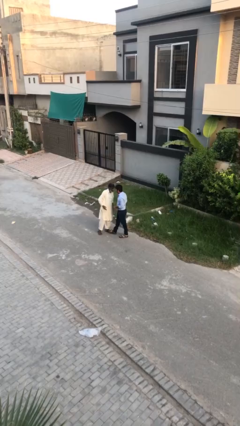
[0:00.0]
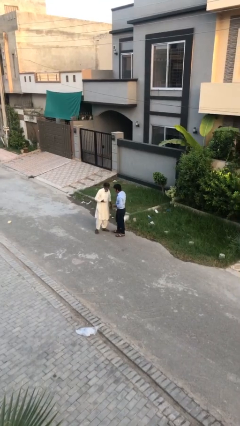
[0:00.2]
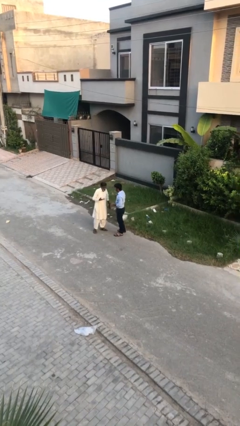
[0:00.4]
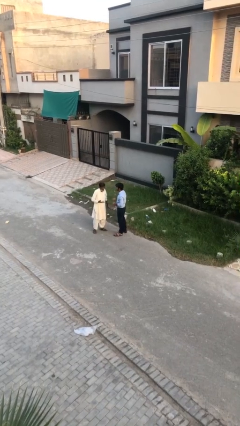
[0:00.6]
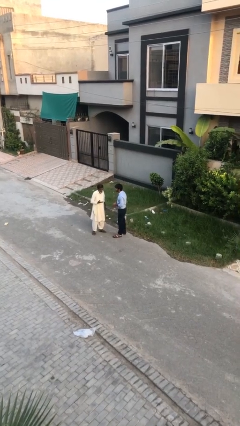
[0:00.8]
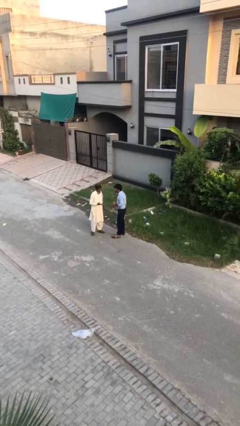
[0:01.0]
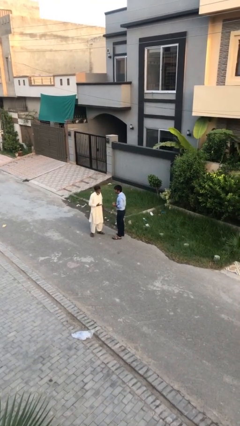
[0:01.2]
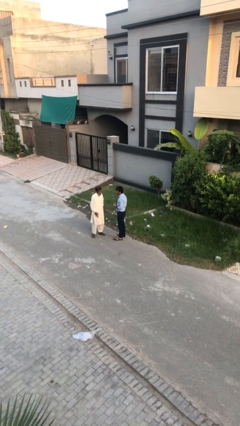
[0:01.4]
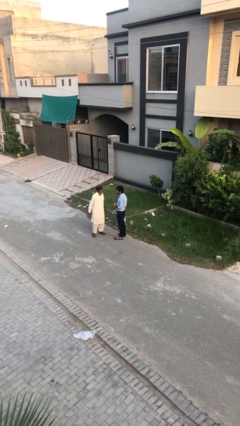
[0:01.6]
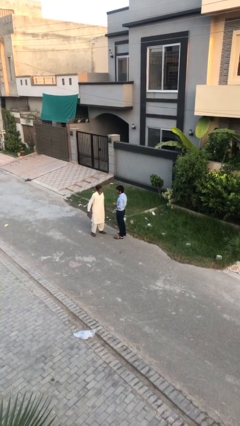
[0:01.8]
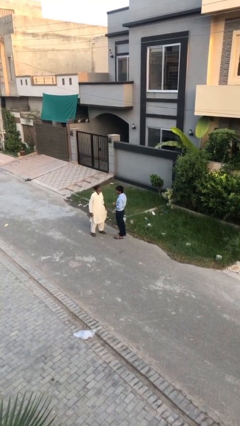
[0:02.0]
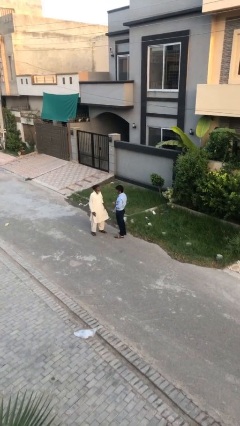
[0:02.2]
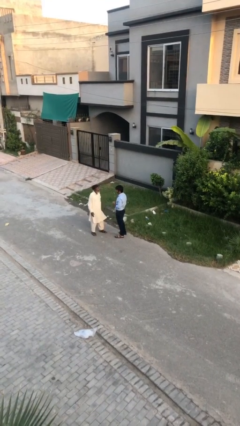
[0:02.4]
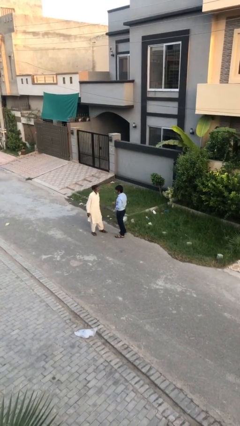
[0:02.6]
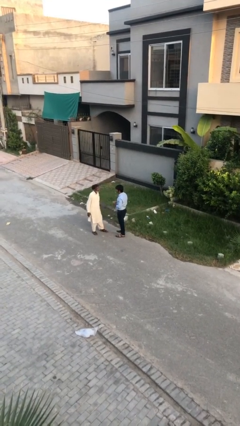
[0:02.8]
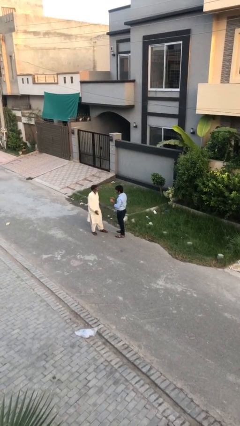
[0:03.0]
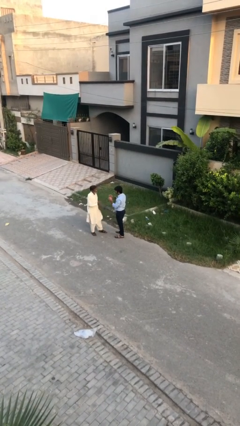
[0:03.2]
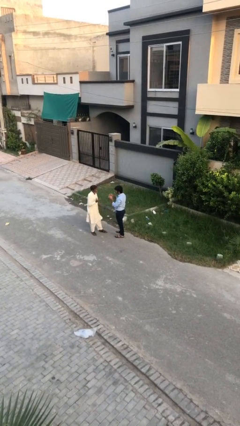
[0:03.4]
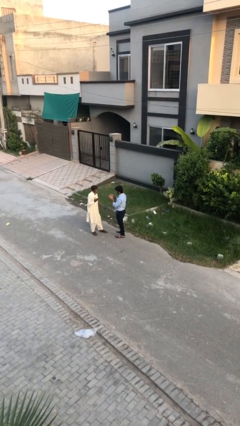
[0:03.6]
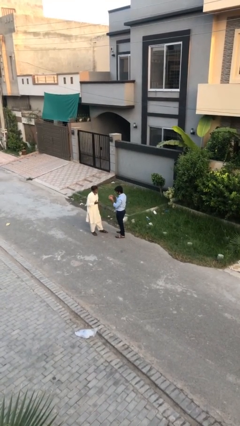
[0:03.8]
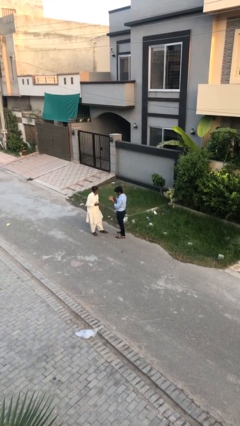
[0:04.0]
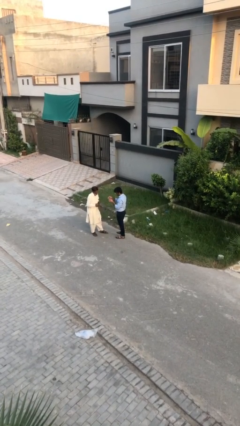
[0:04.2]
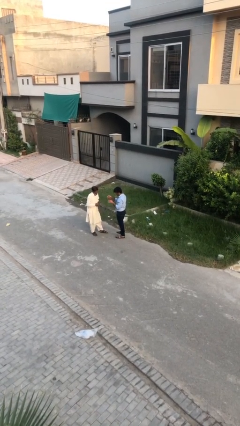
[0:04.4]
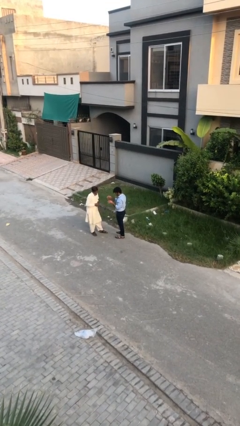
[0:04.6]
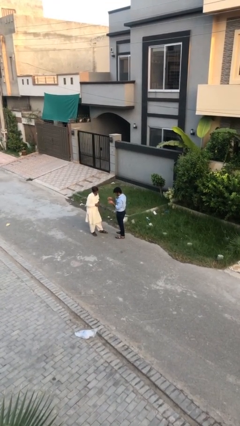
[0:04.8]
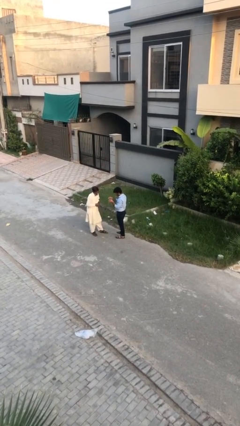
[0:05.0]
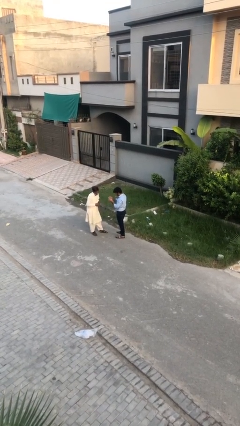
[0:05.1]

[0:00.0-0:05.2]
person talks to person

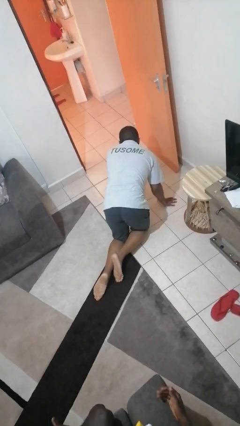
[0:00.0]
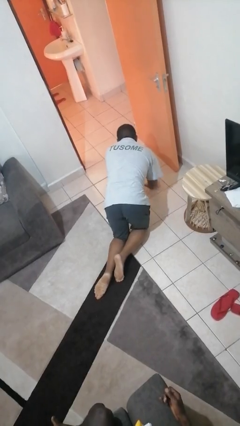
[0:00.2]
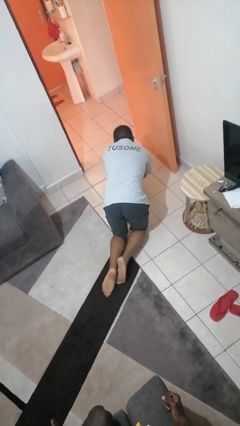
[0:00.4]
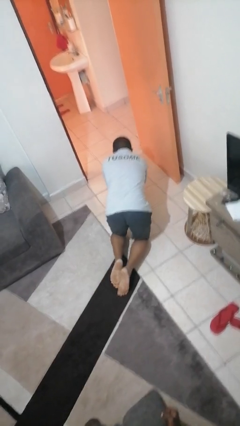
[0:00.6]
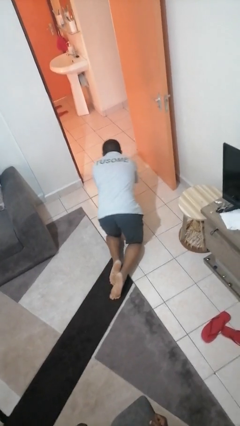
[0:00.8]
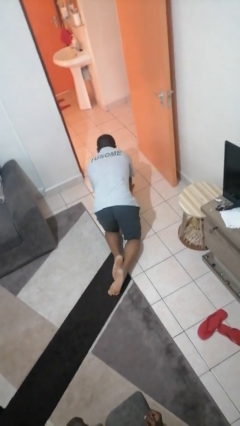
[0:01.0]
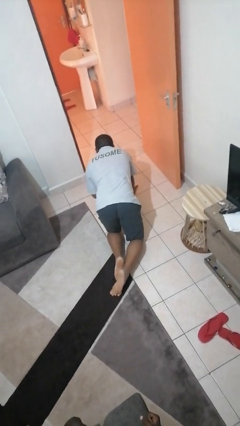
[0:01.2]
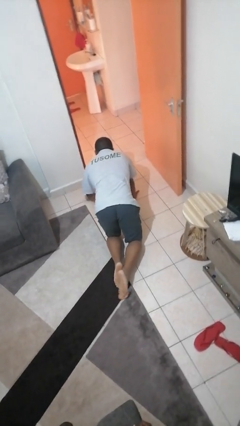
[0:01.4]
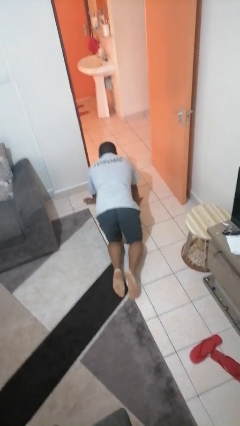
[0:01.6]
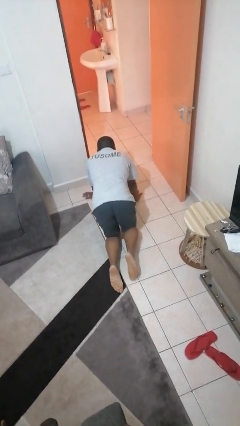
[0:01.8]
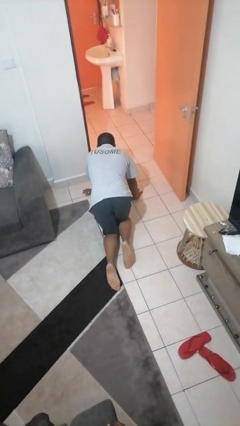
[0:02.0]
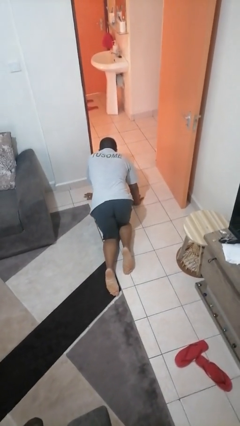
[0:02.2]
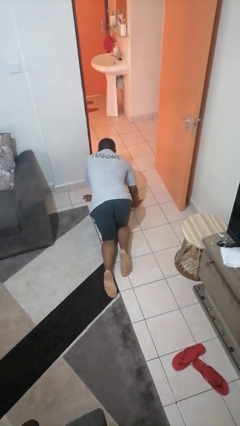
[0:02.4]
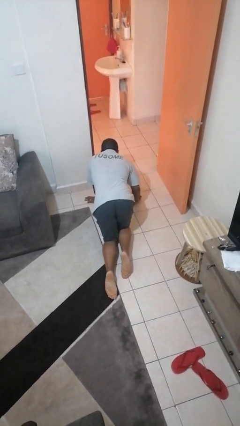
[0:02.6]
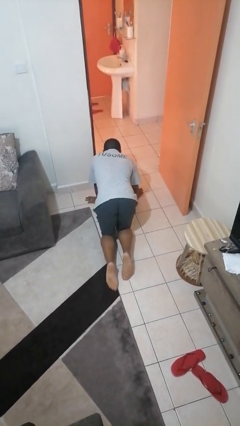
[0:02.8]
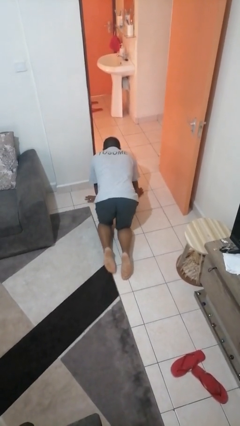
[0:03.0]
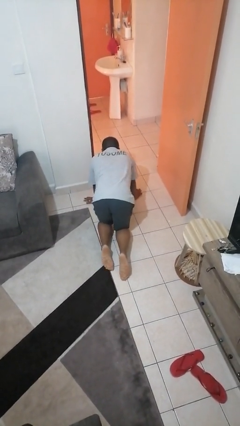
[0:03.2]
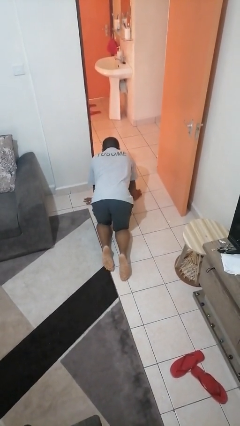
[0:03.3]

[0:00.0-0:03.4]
person crawls

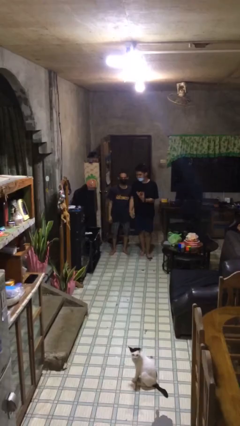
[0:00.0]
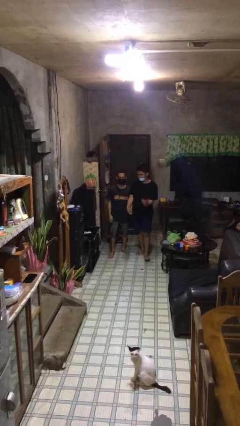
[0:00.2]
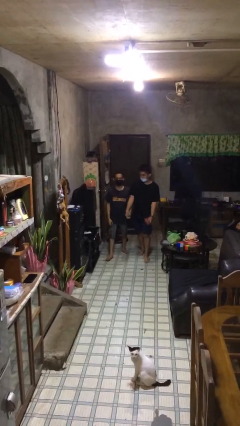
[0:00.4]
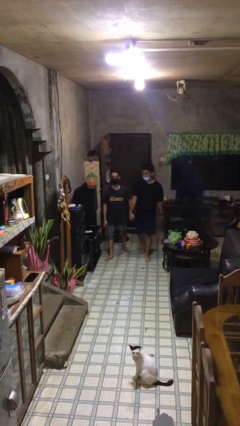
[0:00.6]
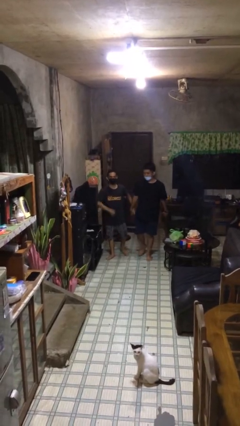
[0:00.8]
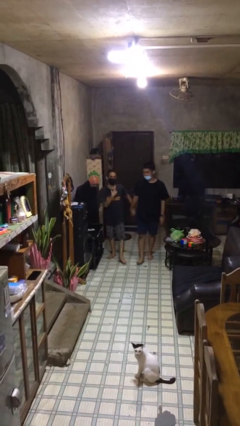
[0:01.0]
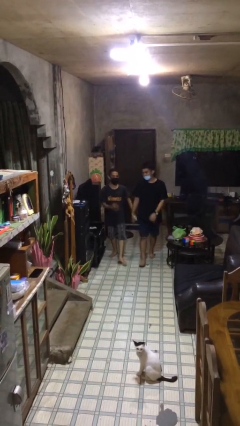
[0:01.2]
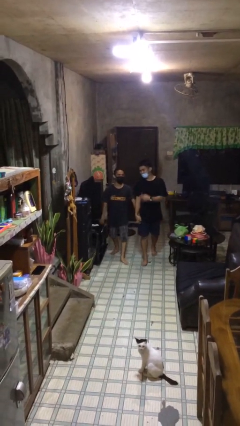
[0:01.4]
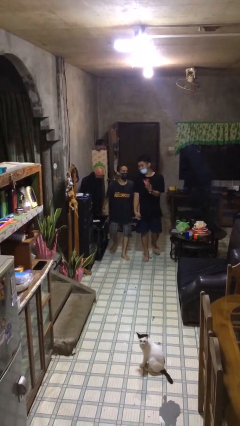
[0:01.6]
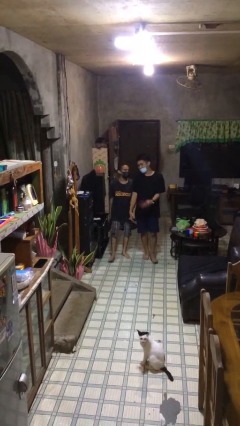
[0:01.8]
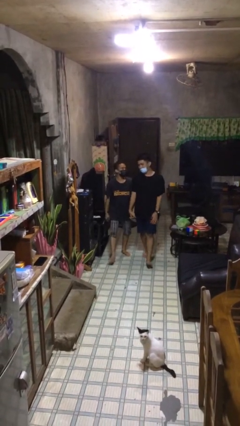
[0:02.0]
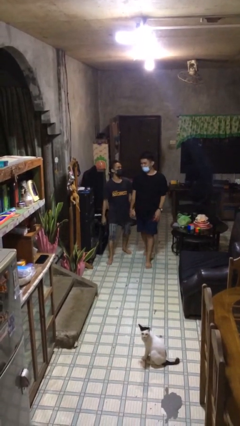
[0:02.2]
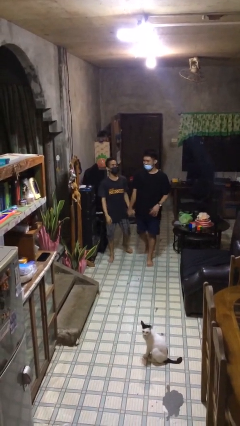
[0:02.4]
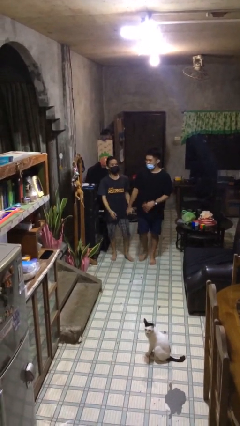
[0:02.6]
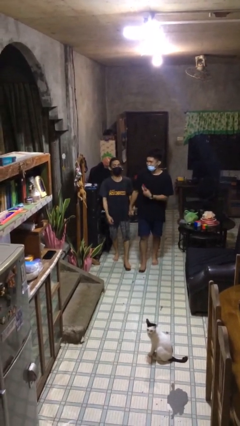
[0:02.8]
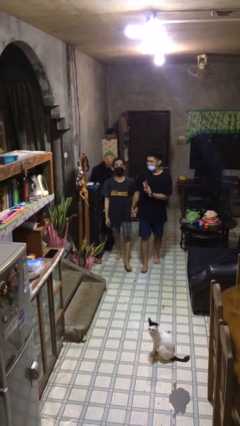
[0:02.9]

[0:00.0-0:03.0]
person holds hand

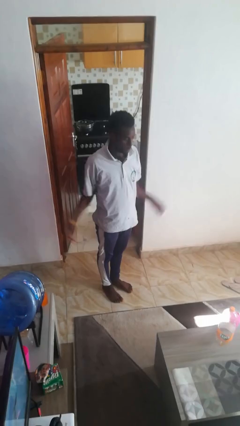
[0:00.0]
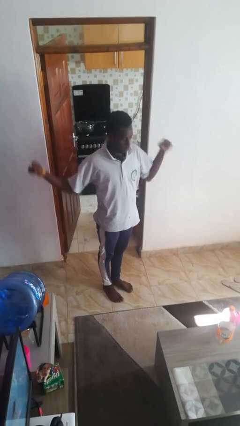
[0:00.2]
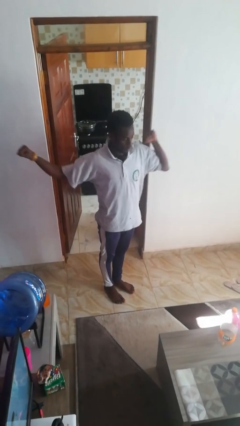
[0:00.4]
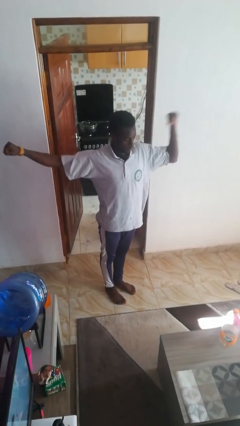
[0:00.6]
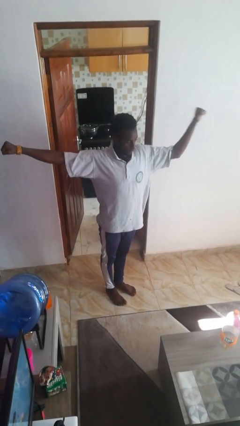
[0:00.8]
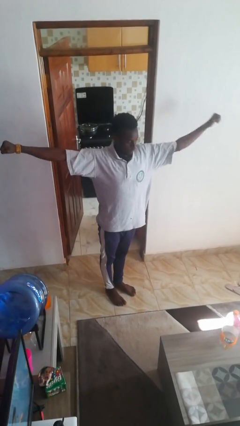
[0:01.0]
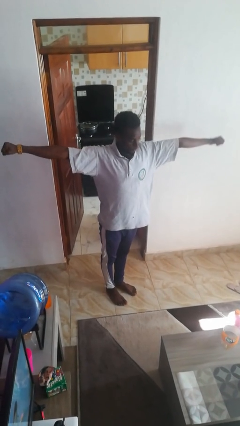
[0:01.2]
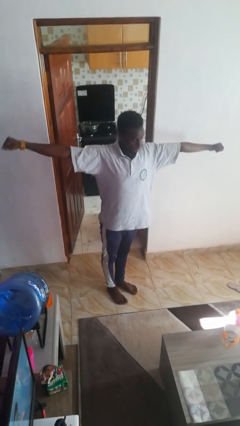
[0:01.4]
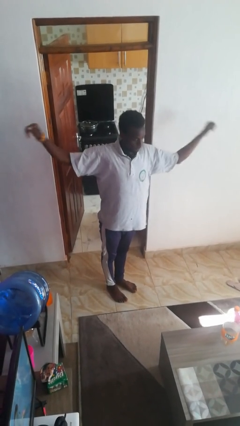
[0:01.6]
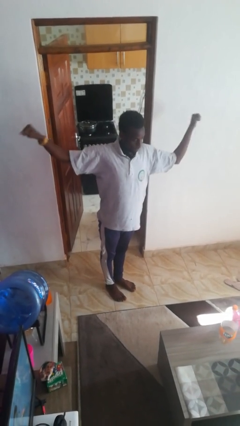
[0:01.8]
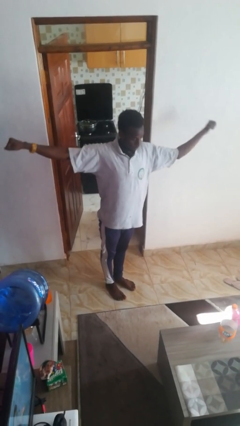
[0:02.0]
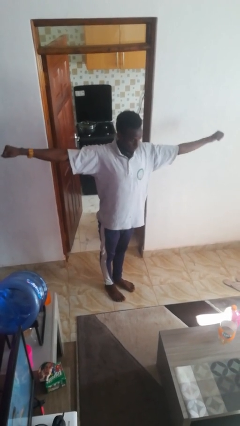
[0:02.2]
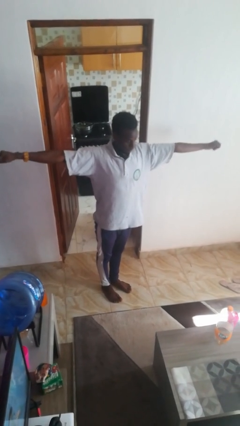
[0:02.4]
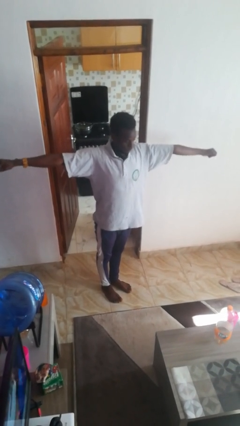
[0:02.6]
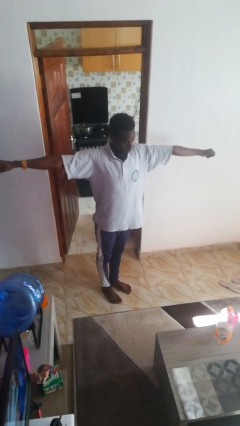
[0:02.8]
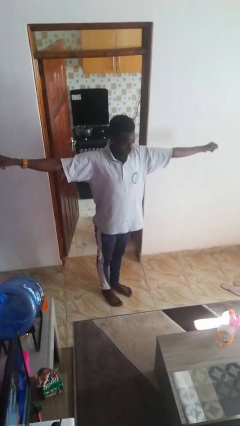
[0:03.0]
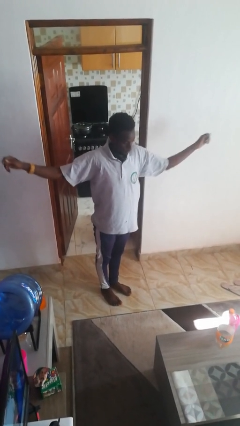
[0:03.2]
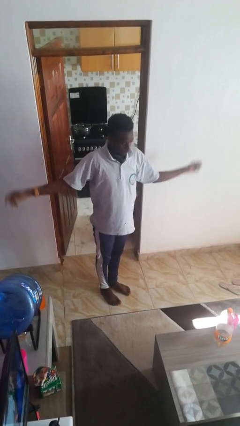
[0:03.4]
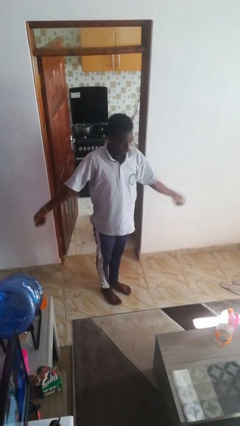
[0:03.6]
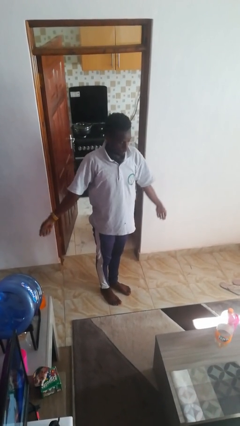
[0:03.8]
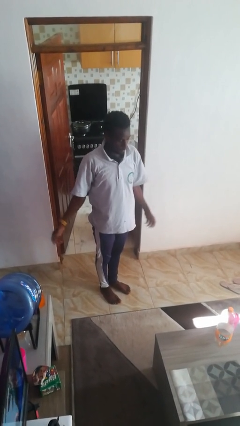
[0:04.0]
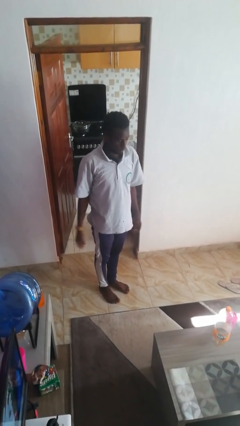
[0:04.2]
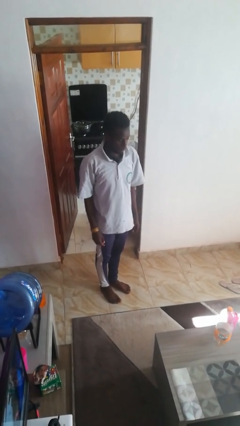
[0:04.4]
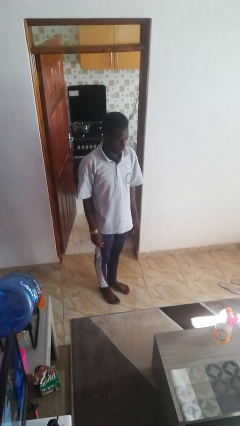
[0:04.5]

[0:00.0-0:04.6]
person stretches arms to side

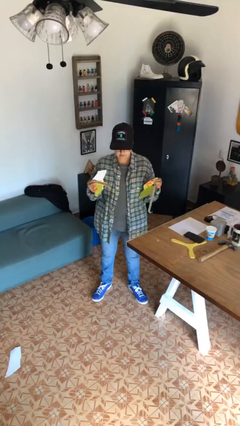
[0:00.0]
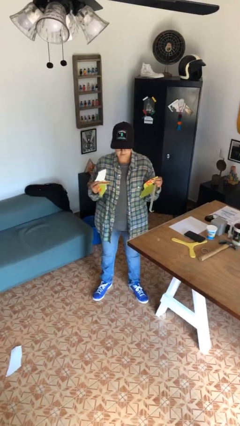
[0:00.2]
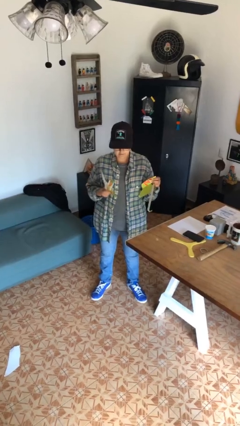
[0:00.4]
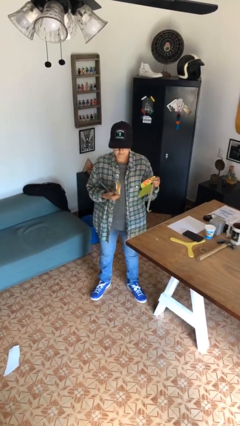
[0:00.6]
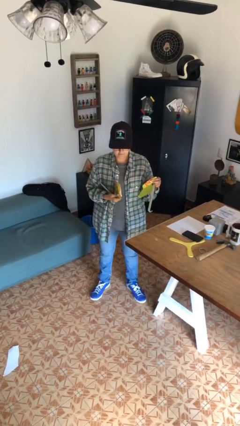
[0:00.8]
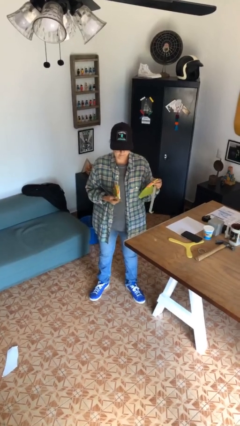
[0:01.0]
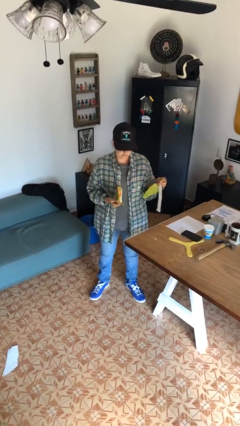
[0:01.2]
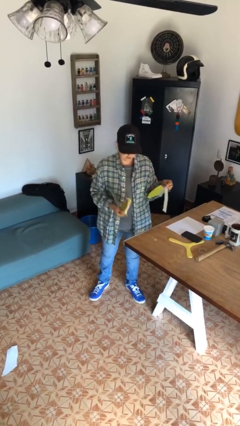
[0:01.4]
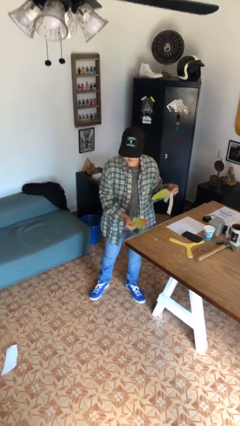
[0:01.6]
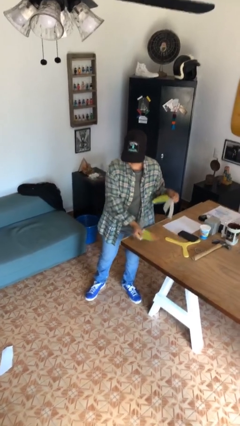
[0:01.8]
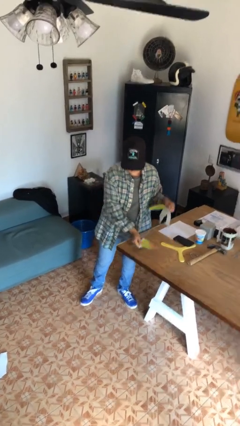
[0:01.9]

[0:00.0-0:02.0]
person tears paper
